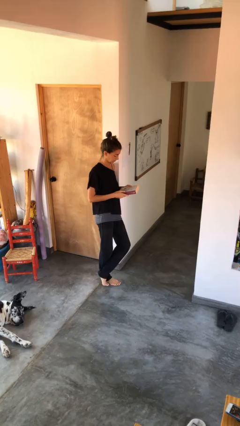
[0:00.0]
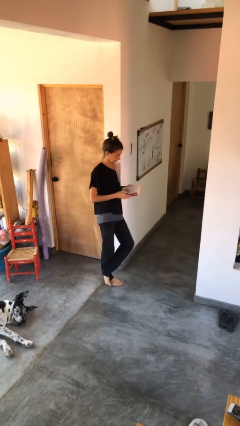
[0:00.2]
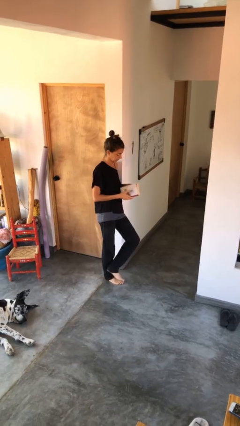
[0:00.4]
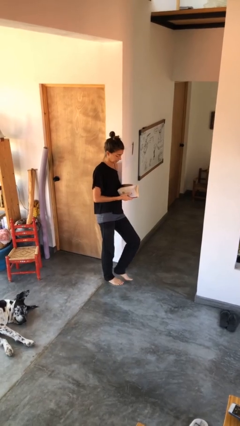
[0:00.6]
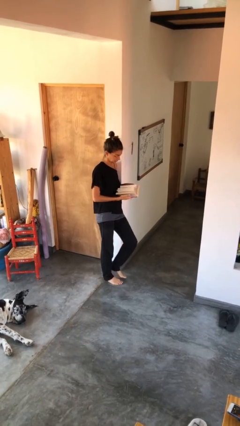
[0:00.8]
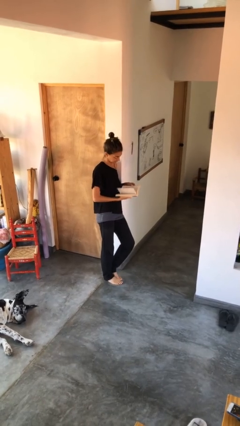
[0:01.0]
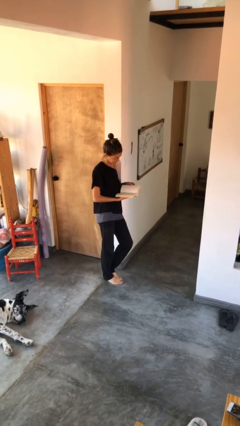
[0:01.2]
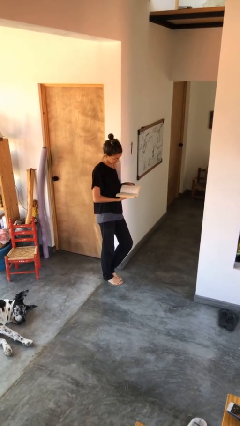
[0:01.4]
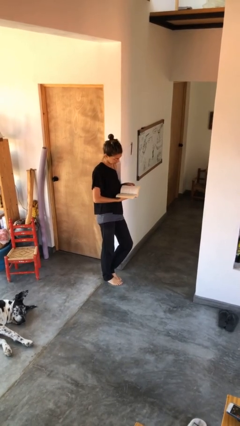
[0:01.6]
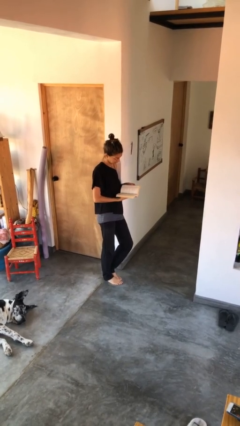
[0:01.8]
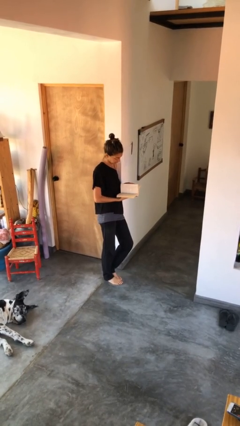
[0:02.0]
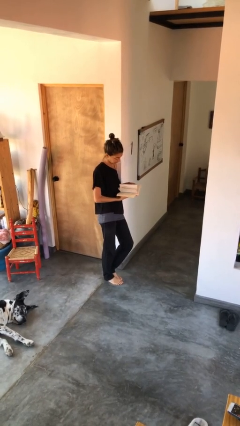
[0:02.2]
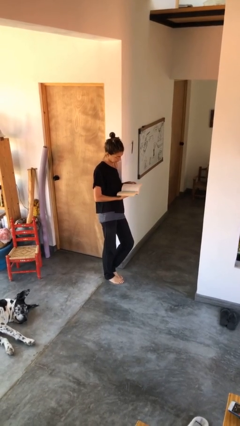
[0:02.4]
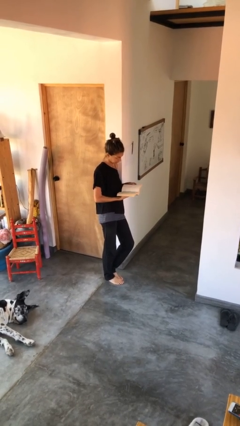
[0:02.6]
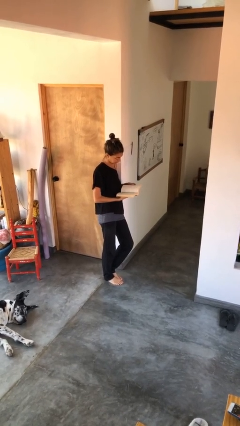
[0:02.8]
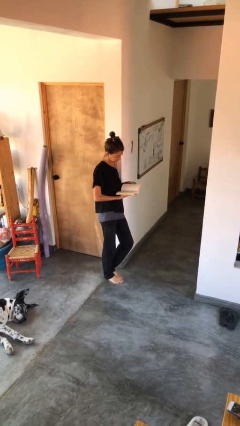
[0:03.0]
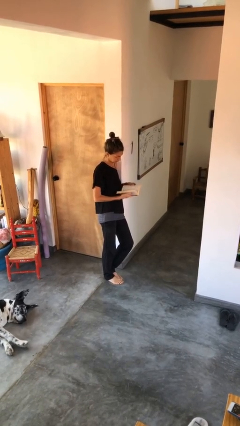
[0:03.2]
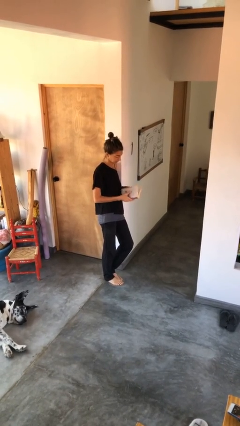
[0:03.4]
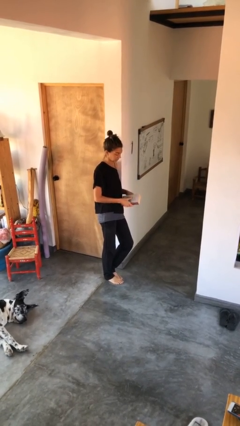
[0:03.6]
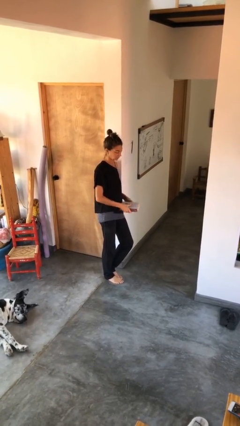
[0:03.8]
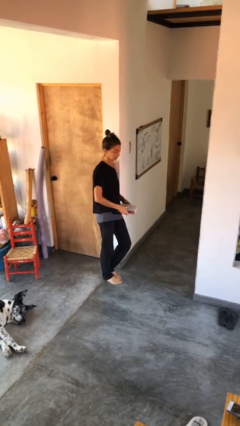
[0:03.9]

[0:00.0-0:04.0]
person reads book

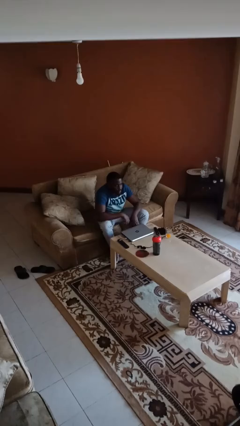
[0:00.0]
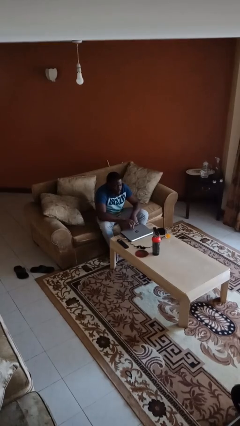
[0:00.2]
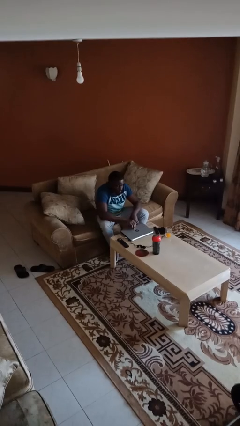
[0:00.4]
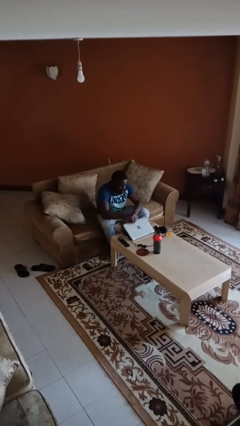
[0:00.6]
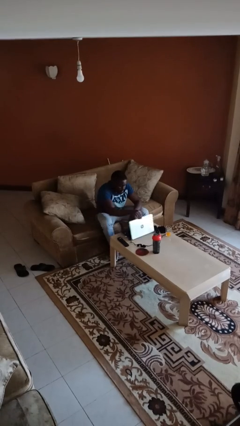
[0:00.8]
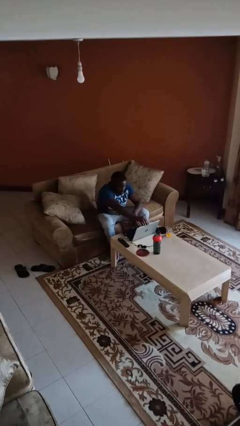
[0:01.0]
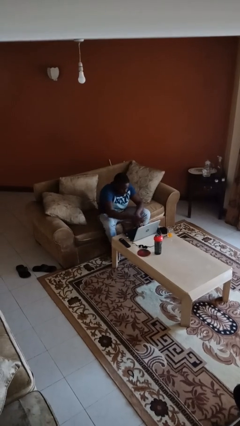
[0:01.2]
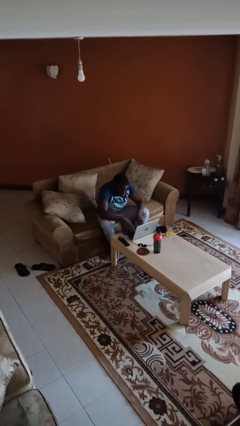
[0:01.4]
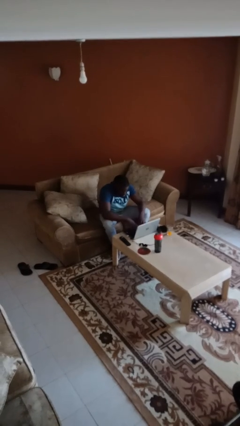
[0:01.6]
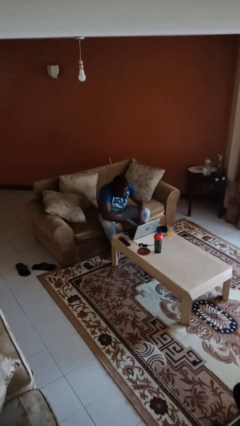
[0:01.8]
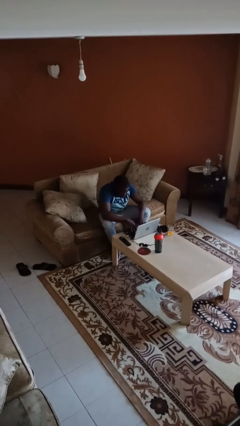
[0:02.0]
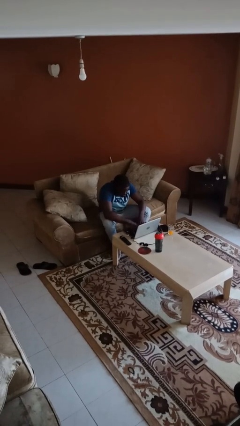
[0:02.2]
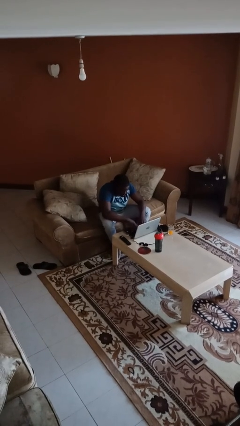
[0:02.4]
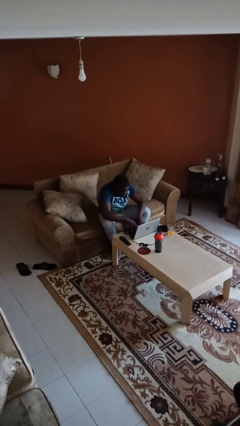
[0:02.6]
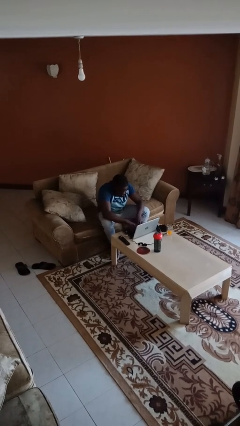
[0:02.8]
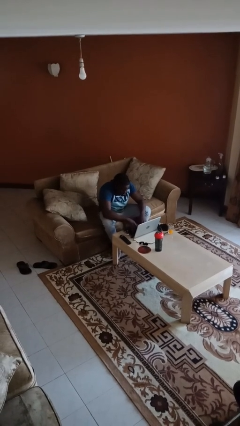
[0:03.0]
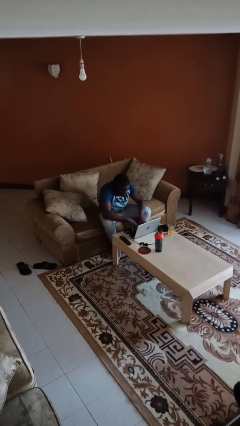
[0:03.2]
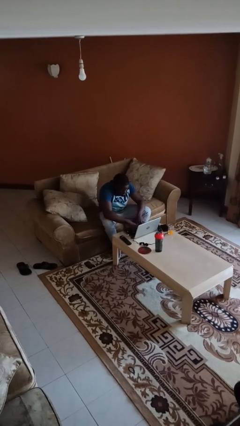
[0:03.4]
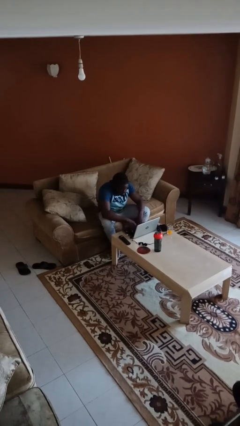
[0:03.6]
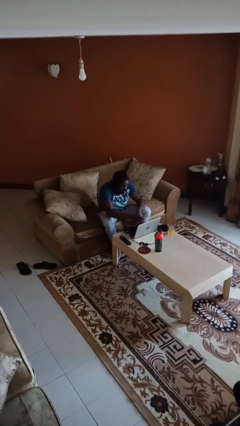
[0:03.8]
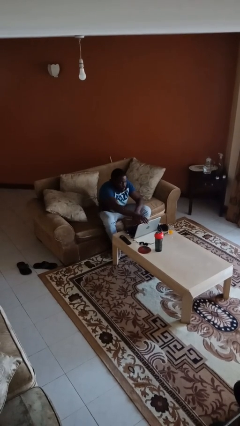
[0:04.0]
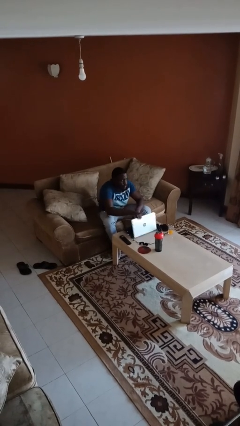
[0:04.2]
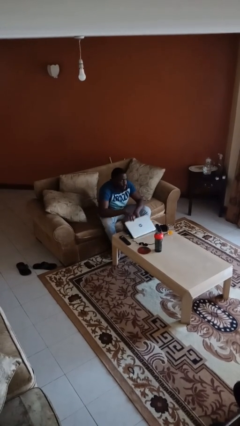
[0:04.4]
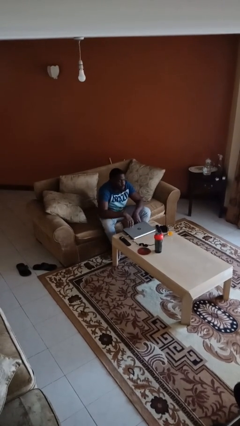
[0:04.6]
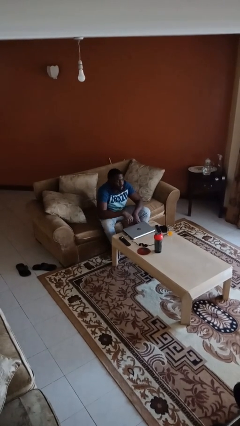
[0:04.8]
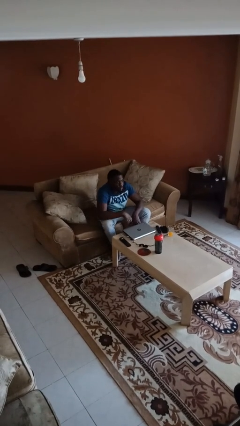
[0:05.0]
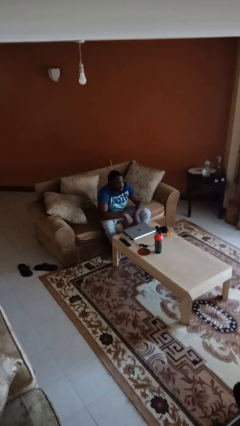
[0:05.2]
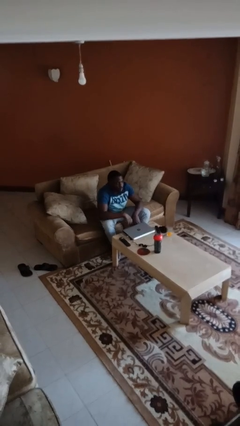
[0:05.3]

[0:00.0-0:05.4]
person interacts with laptop

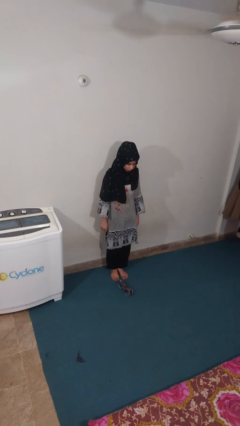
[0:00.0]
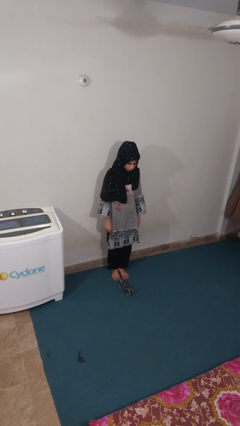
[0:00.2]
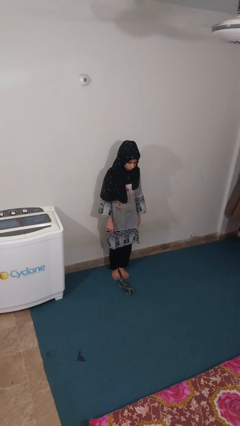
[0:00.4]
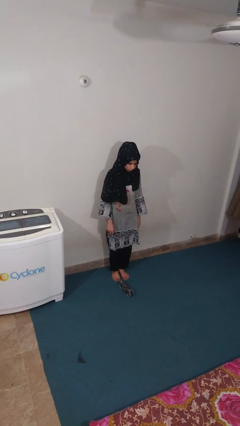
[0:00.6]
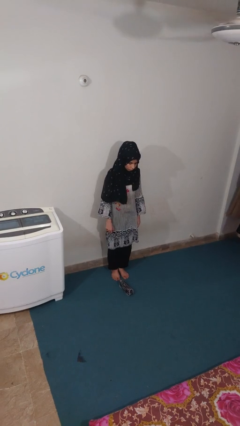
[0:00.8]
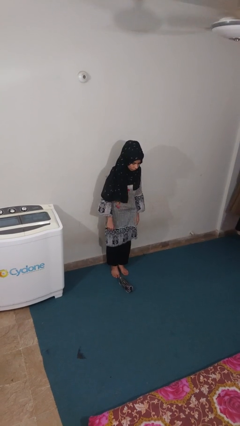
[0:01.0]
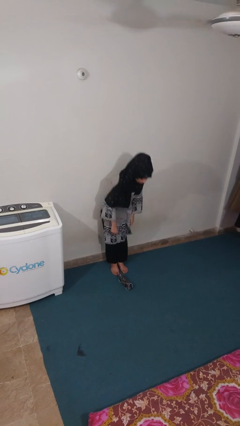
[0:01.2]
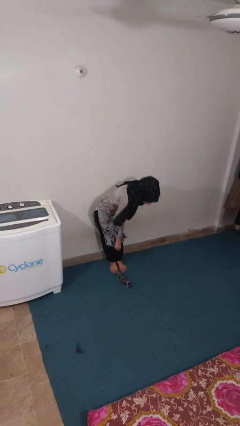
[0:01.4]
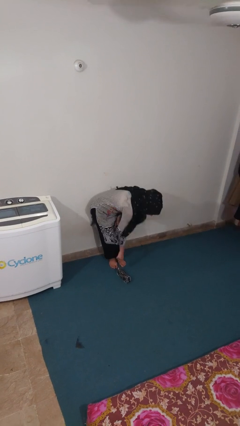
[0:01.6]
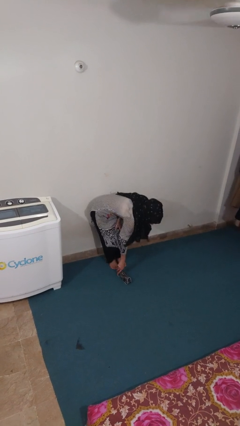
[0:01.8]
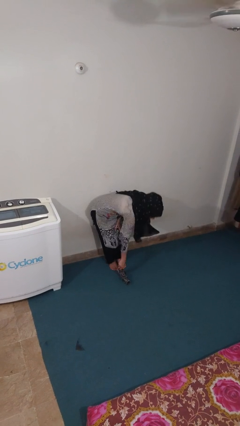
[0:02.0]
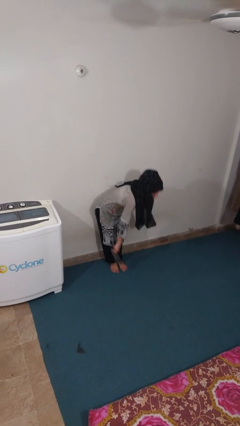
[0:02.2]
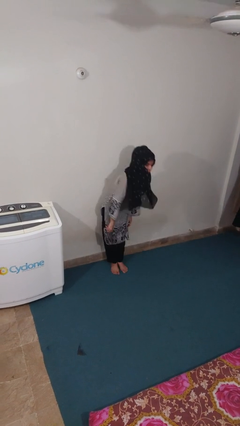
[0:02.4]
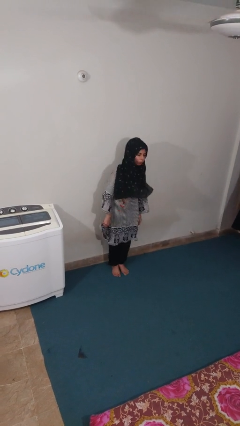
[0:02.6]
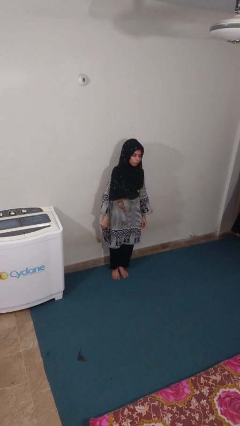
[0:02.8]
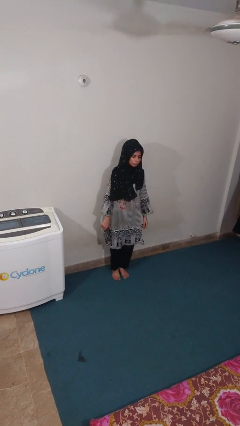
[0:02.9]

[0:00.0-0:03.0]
person picks up object from floor

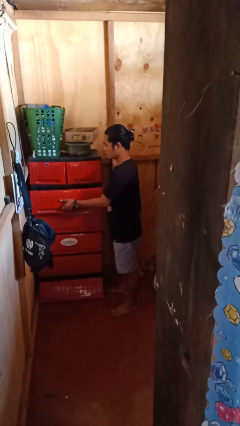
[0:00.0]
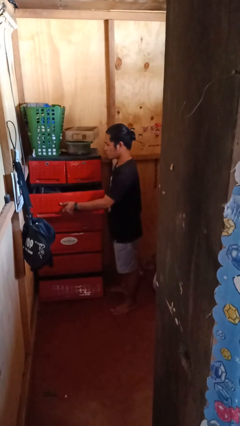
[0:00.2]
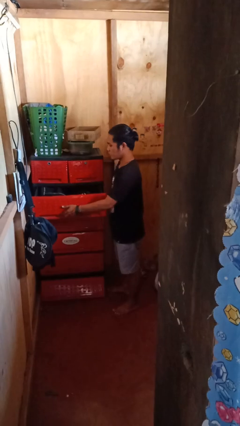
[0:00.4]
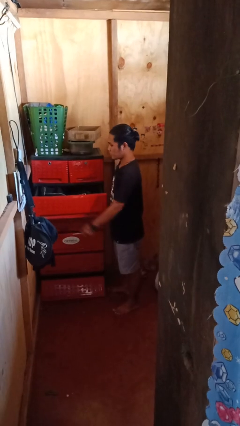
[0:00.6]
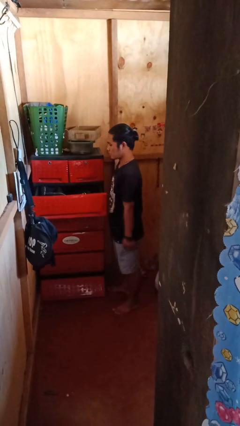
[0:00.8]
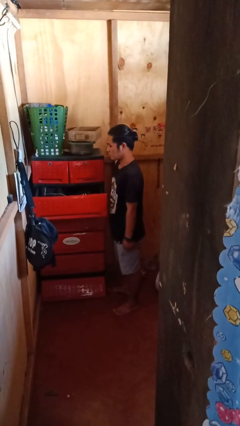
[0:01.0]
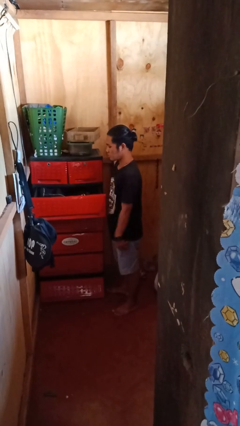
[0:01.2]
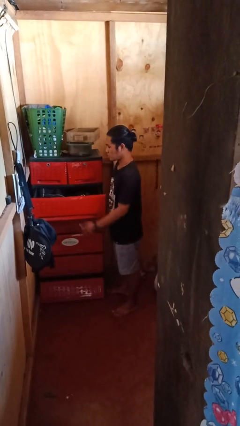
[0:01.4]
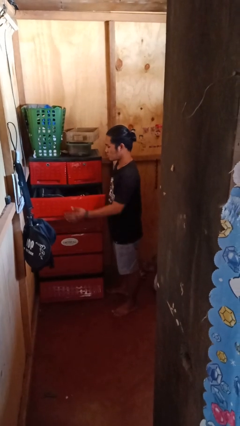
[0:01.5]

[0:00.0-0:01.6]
person opens dresser drawer

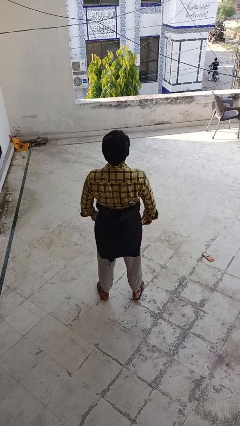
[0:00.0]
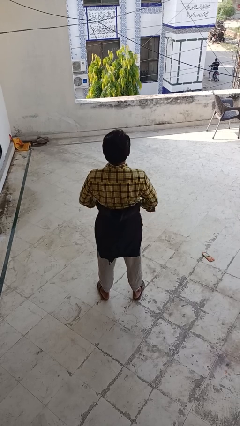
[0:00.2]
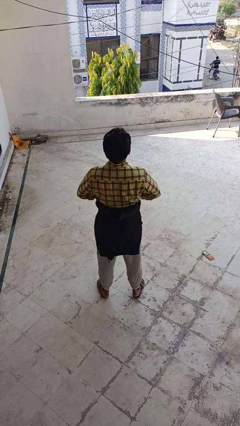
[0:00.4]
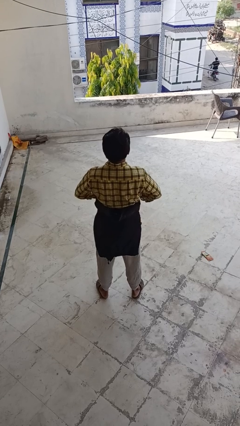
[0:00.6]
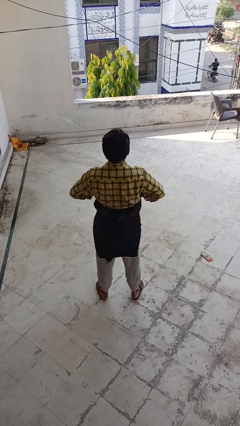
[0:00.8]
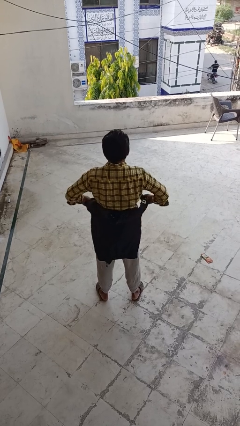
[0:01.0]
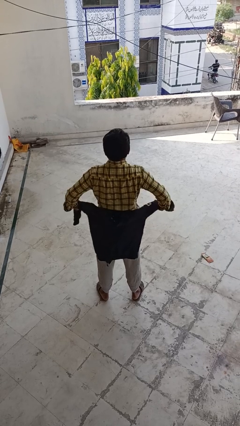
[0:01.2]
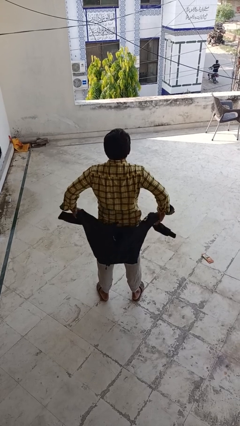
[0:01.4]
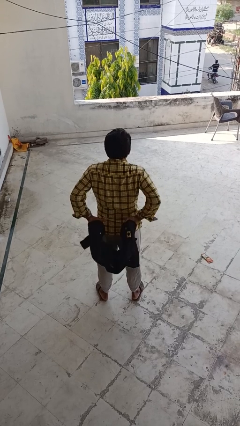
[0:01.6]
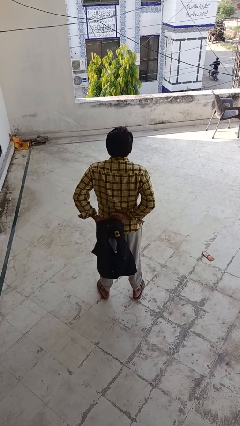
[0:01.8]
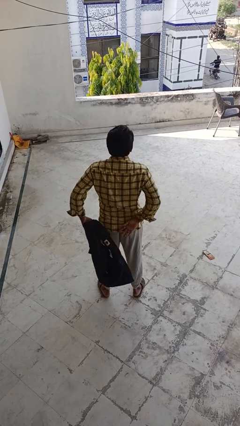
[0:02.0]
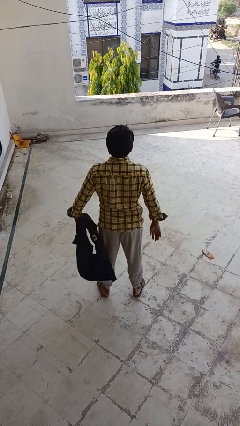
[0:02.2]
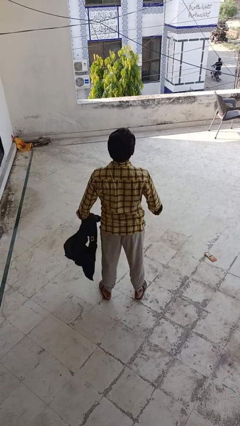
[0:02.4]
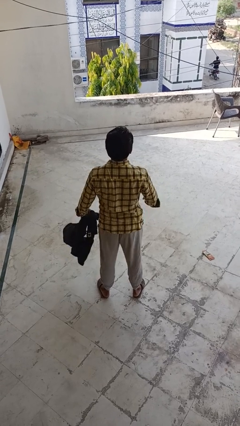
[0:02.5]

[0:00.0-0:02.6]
person unties jacket around waist

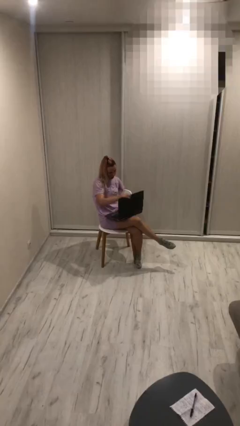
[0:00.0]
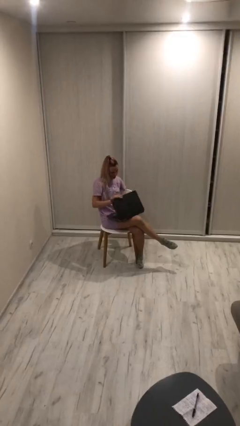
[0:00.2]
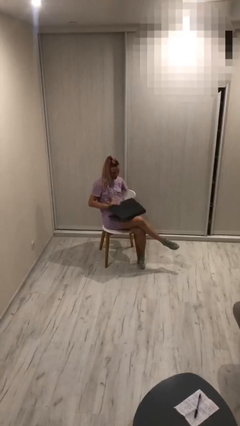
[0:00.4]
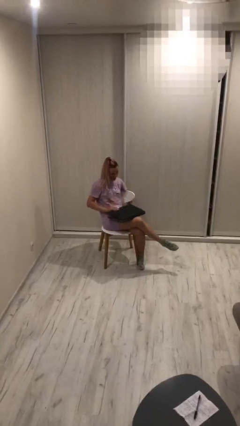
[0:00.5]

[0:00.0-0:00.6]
person closes laptop

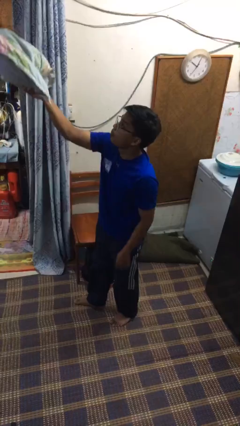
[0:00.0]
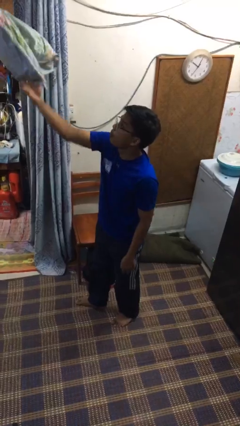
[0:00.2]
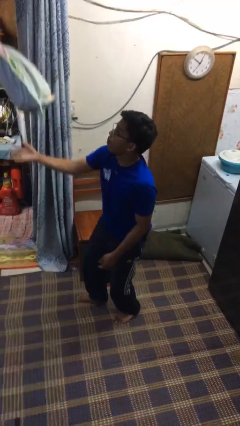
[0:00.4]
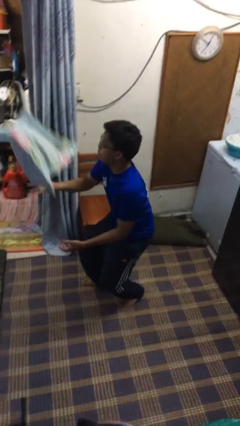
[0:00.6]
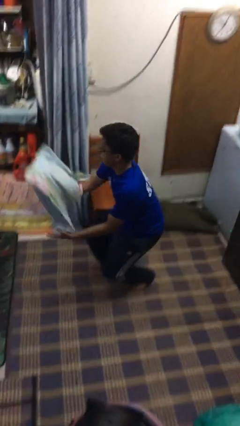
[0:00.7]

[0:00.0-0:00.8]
person drops object
